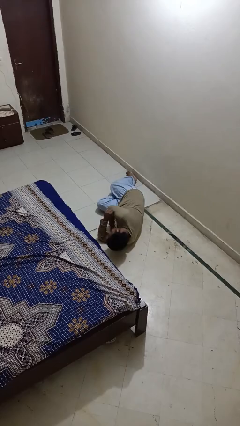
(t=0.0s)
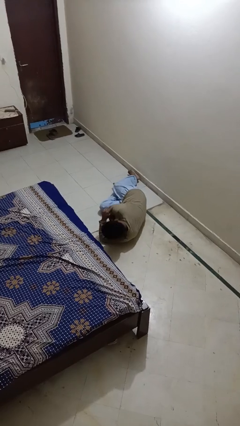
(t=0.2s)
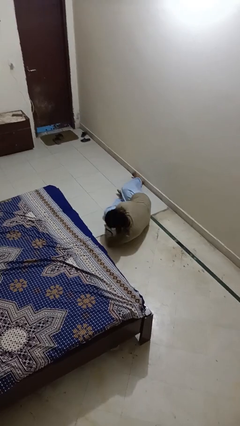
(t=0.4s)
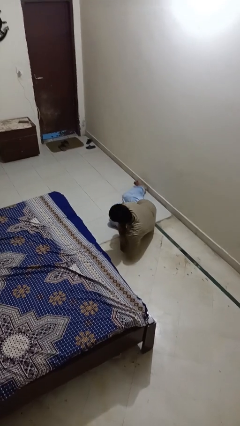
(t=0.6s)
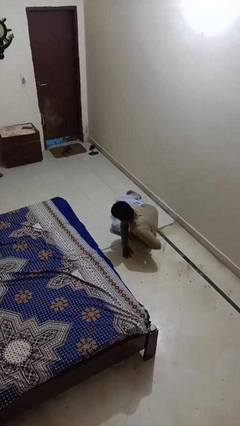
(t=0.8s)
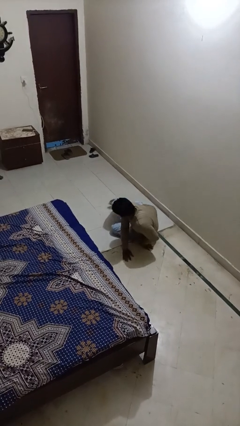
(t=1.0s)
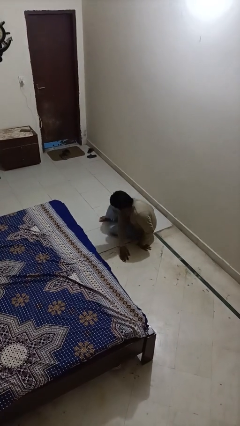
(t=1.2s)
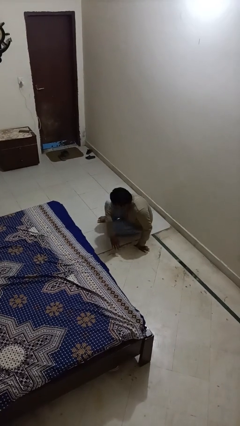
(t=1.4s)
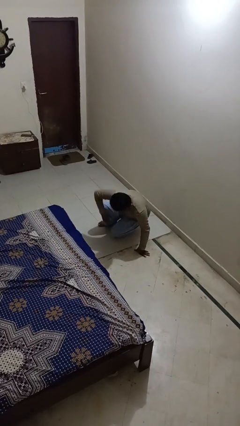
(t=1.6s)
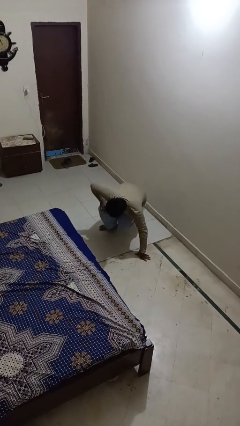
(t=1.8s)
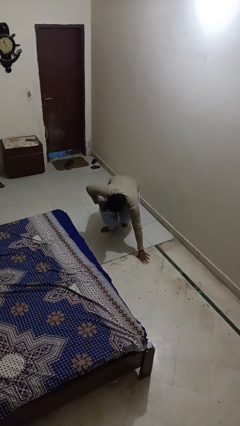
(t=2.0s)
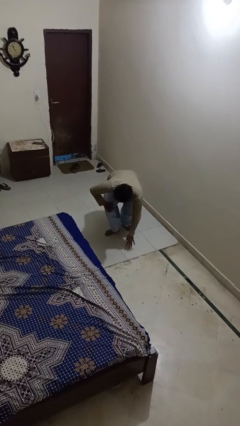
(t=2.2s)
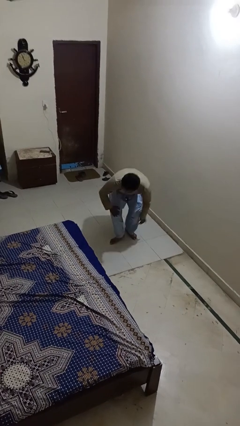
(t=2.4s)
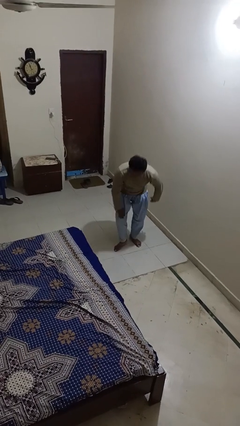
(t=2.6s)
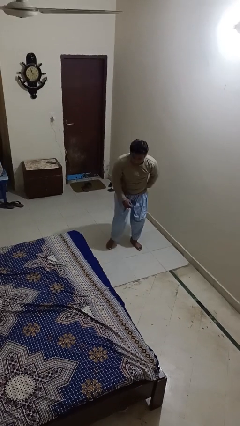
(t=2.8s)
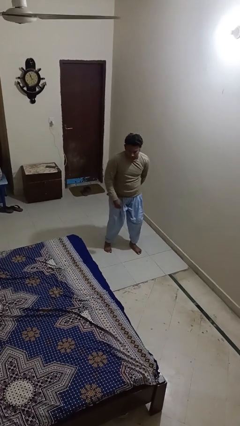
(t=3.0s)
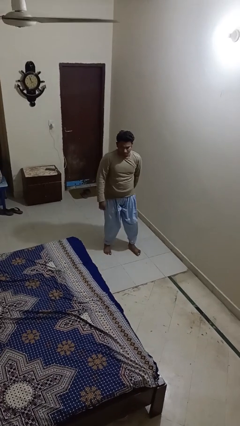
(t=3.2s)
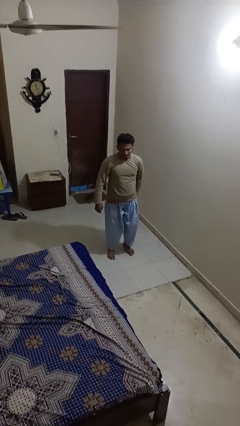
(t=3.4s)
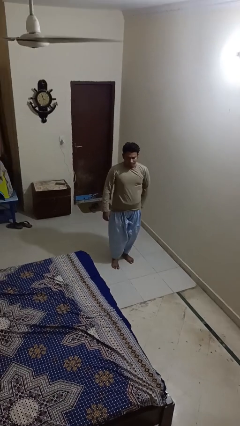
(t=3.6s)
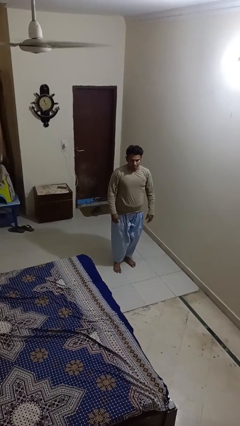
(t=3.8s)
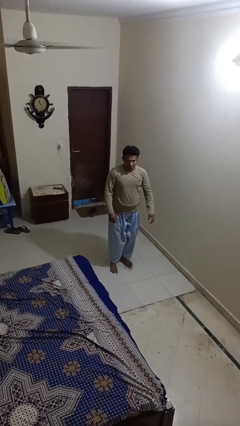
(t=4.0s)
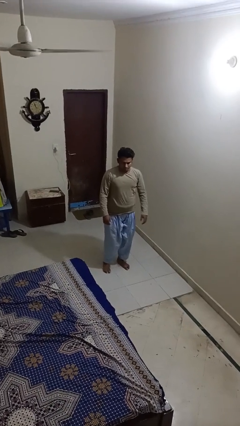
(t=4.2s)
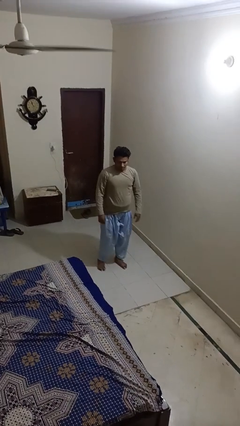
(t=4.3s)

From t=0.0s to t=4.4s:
person stands up from floor

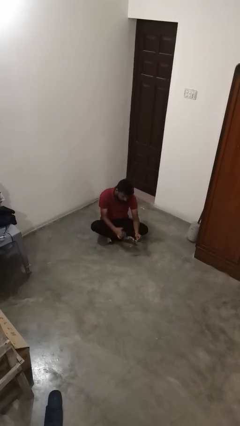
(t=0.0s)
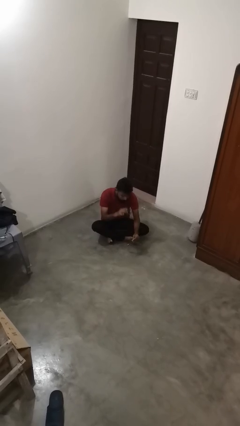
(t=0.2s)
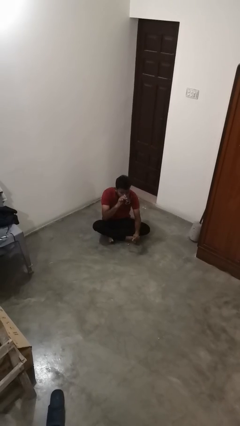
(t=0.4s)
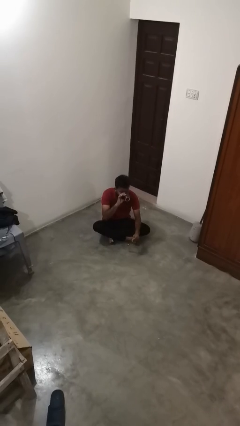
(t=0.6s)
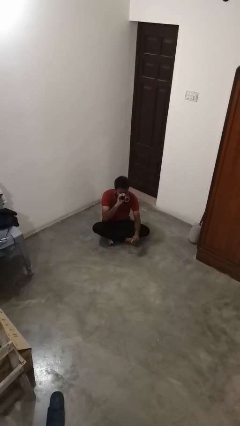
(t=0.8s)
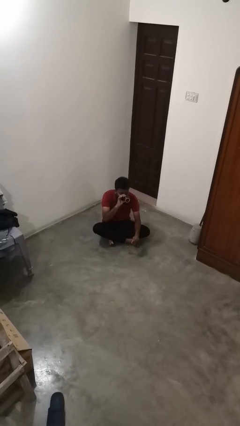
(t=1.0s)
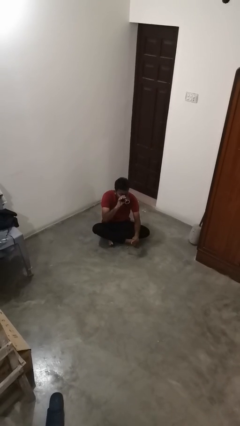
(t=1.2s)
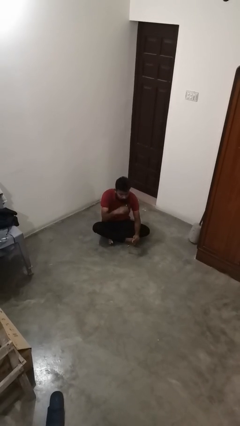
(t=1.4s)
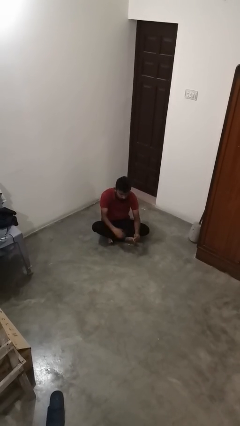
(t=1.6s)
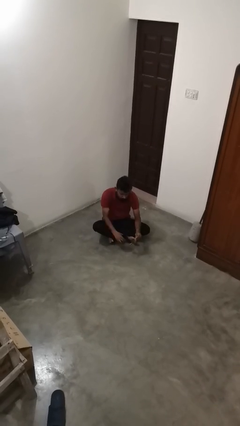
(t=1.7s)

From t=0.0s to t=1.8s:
person drinks from mug

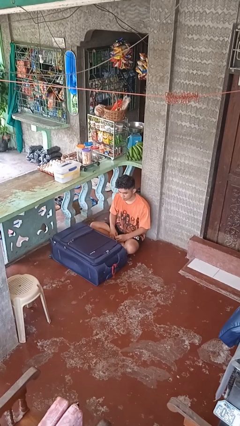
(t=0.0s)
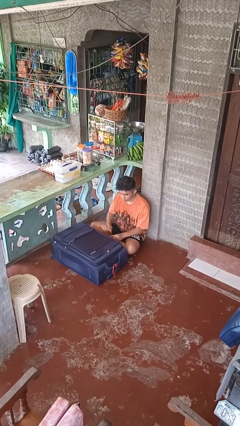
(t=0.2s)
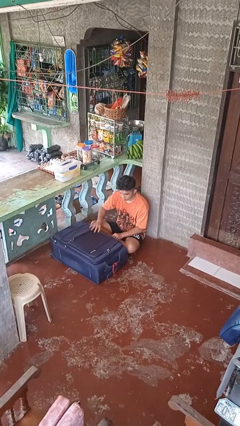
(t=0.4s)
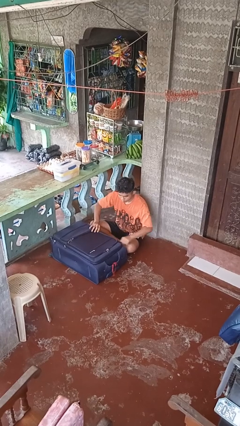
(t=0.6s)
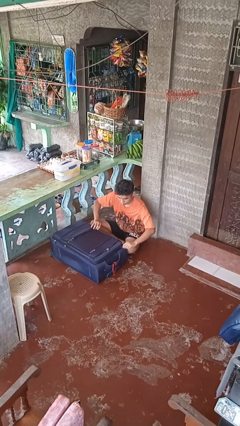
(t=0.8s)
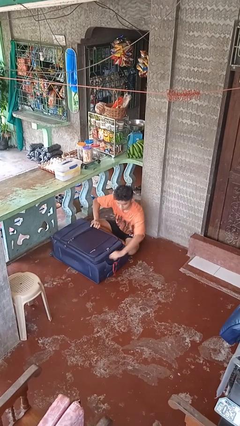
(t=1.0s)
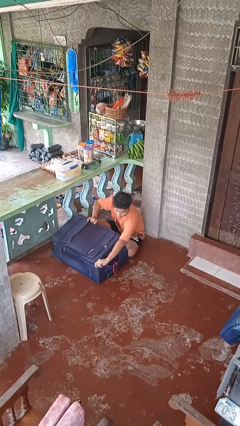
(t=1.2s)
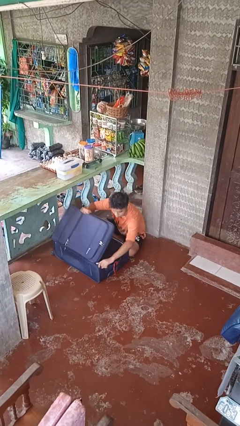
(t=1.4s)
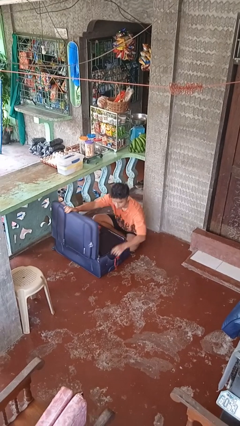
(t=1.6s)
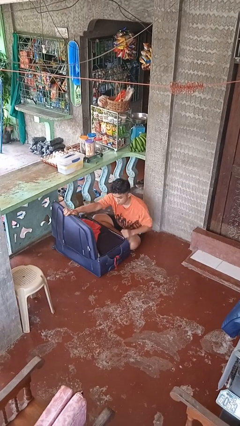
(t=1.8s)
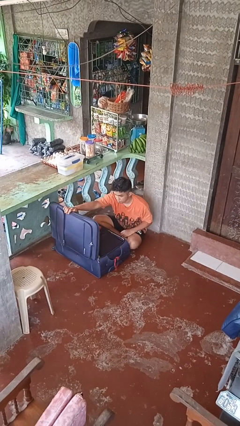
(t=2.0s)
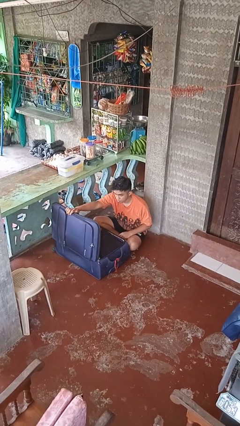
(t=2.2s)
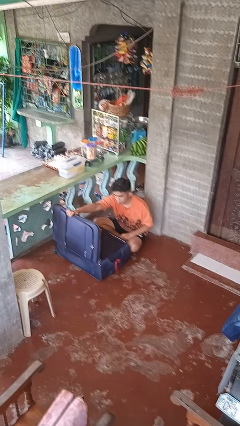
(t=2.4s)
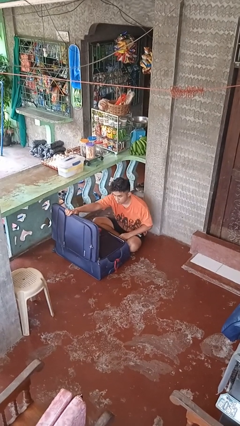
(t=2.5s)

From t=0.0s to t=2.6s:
person opens suitcase

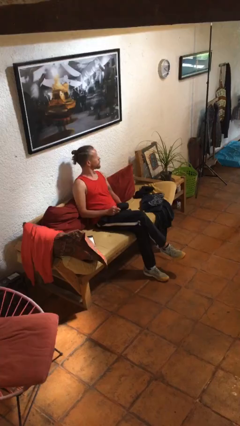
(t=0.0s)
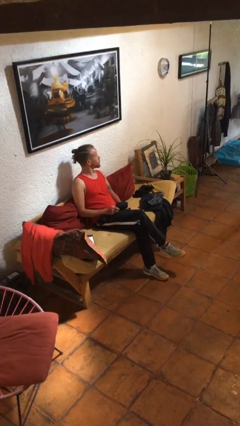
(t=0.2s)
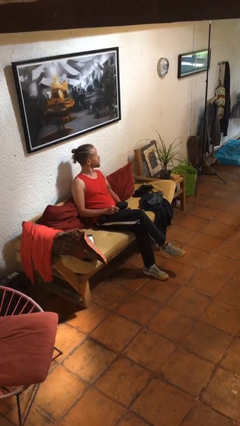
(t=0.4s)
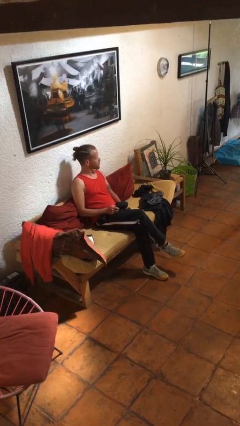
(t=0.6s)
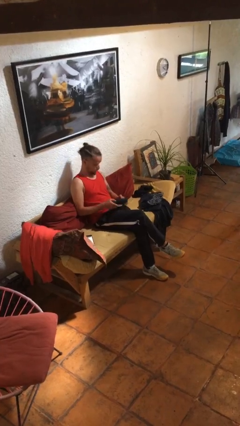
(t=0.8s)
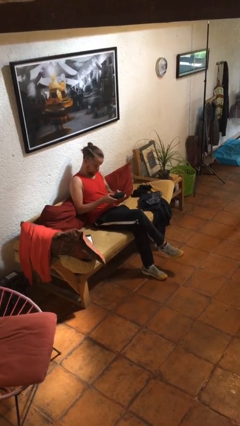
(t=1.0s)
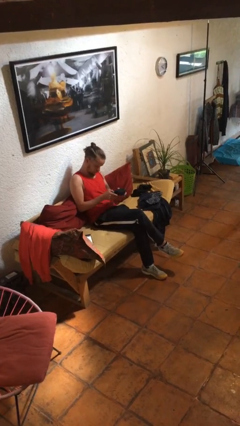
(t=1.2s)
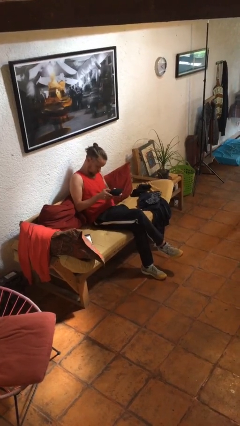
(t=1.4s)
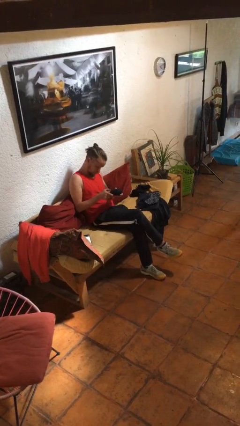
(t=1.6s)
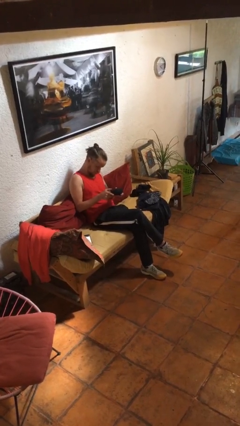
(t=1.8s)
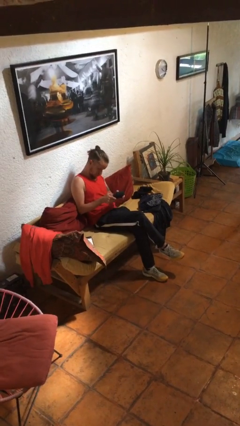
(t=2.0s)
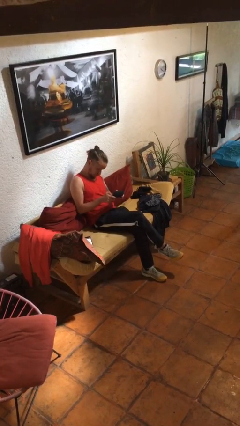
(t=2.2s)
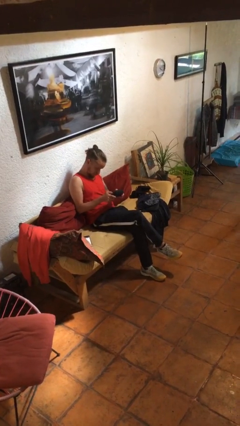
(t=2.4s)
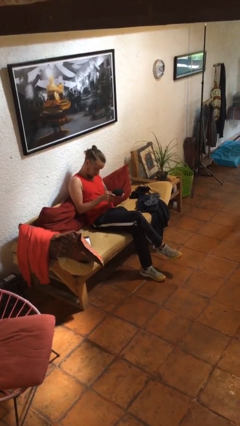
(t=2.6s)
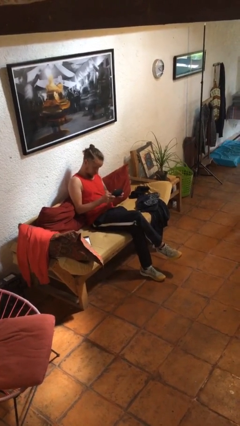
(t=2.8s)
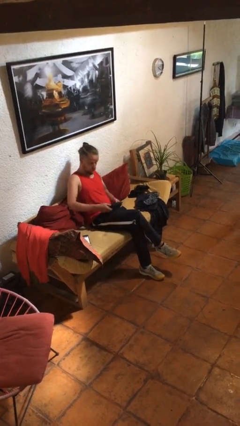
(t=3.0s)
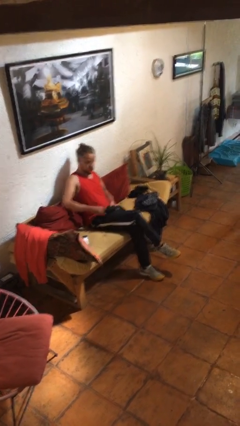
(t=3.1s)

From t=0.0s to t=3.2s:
person interacts with handheld game

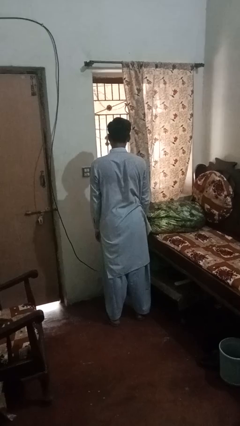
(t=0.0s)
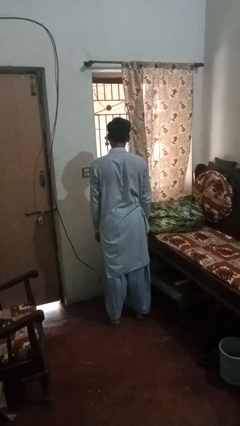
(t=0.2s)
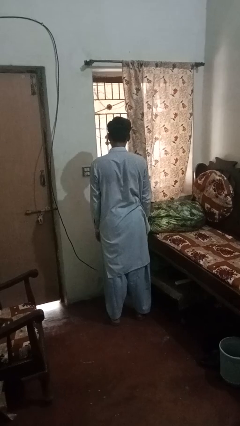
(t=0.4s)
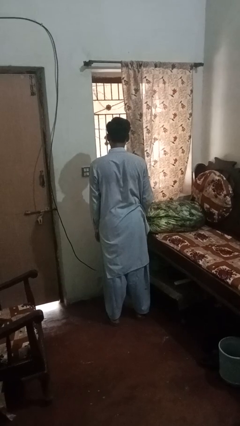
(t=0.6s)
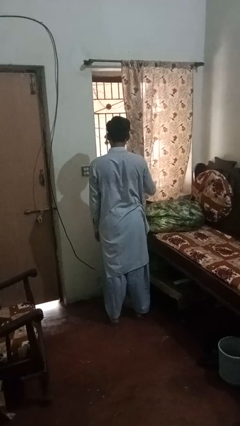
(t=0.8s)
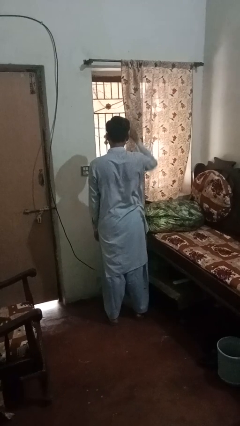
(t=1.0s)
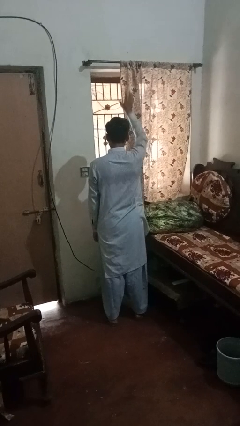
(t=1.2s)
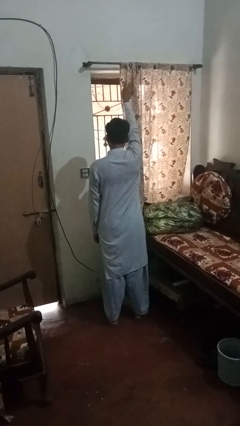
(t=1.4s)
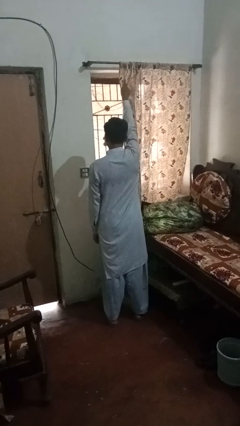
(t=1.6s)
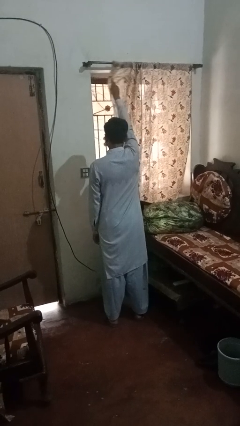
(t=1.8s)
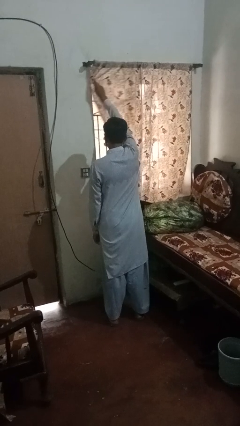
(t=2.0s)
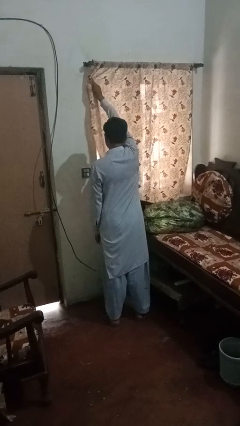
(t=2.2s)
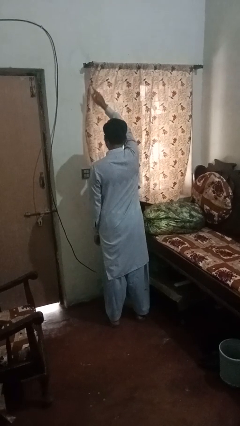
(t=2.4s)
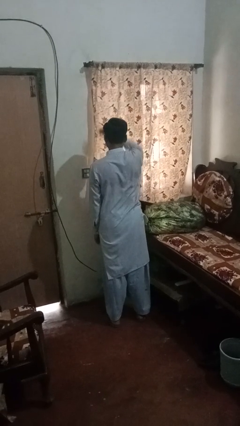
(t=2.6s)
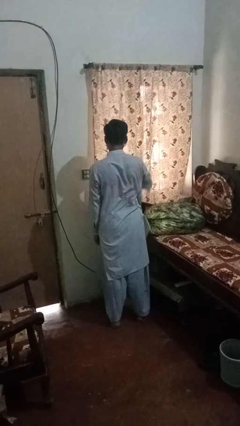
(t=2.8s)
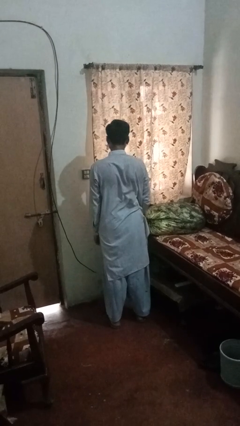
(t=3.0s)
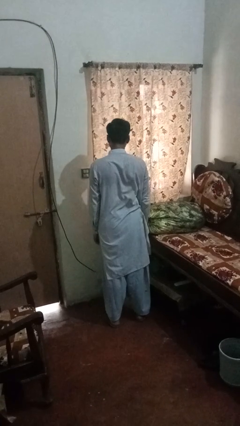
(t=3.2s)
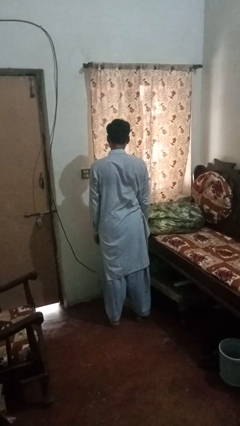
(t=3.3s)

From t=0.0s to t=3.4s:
person closes curtains

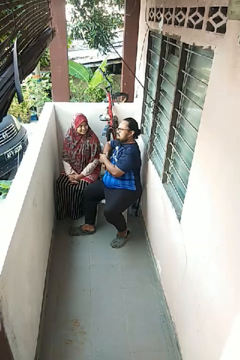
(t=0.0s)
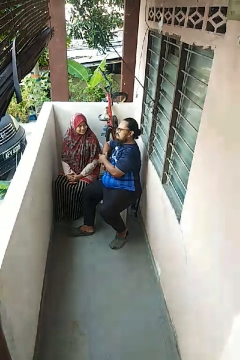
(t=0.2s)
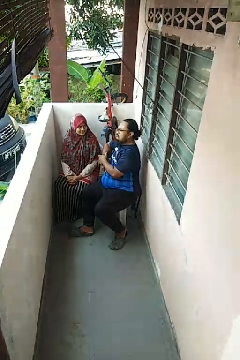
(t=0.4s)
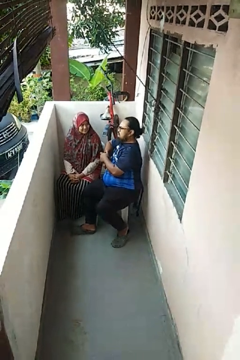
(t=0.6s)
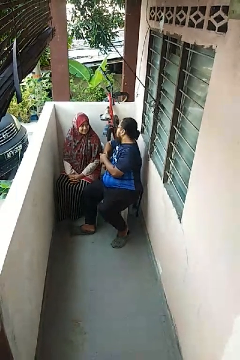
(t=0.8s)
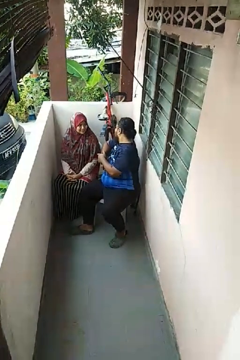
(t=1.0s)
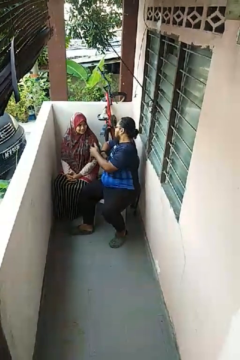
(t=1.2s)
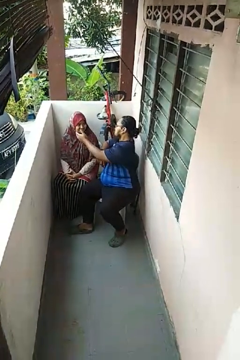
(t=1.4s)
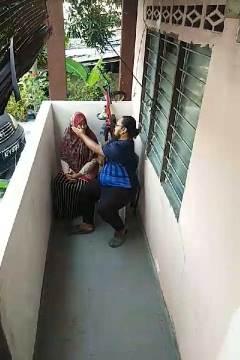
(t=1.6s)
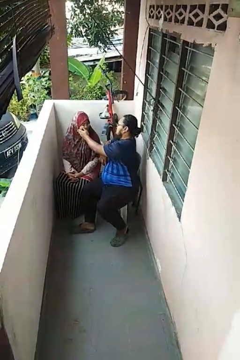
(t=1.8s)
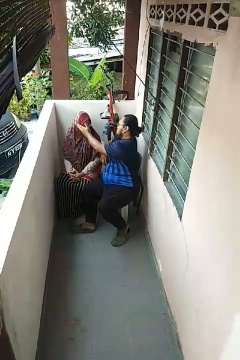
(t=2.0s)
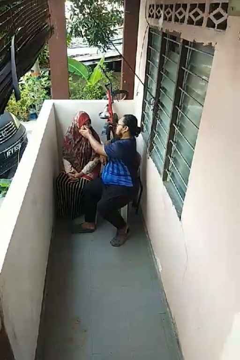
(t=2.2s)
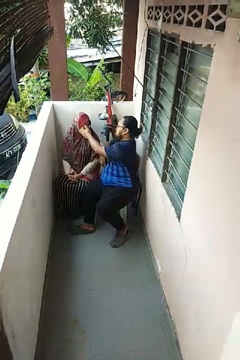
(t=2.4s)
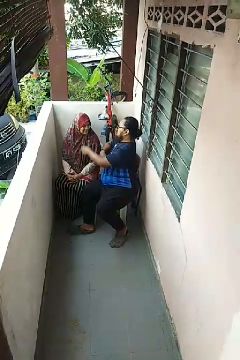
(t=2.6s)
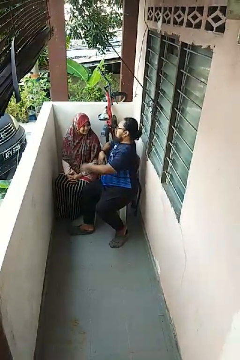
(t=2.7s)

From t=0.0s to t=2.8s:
person touches face of person
